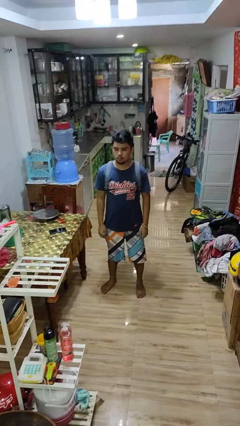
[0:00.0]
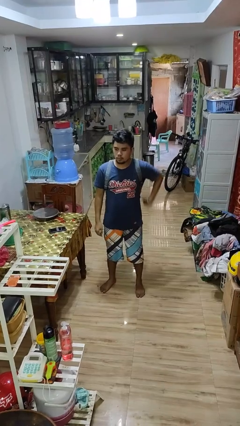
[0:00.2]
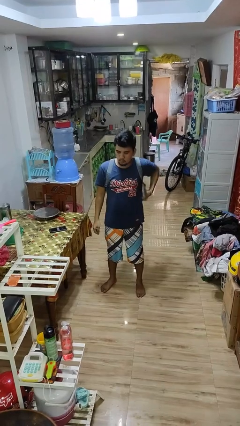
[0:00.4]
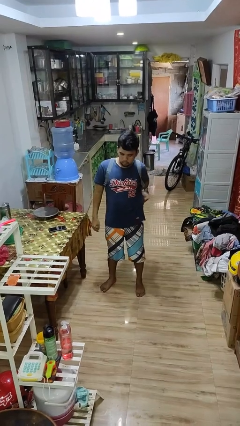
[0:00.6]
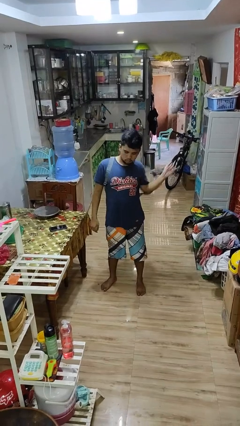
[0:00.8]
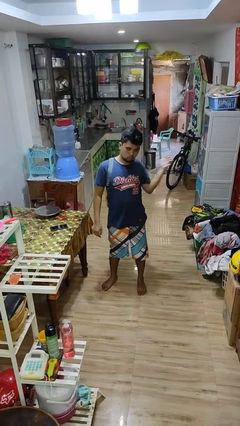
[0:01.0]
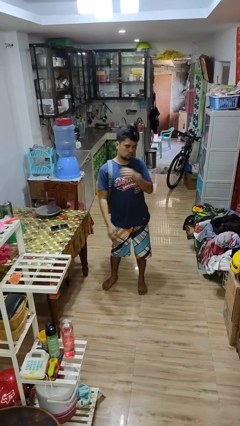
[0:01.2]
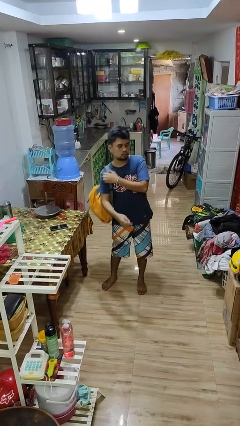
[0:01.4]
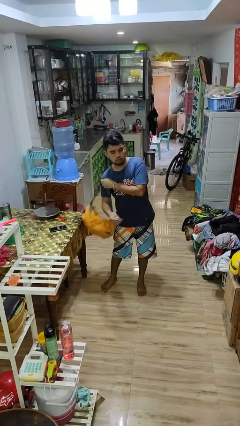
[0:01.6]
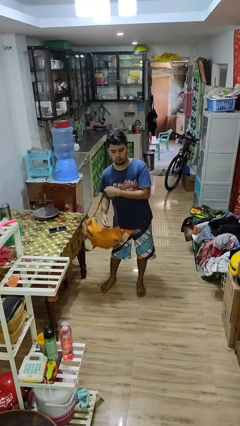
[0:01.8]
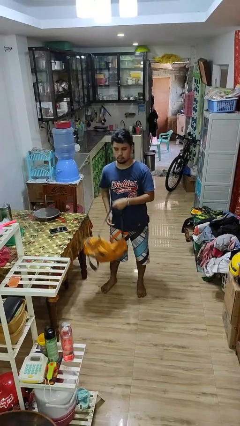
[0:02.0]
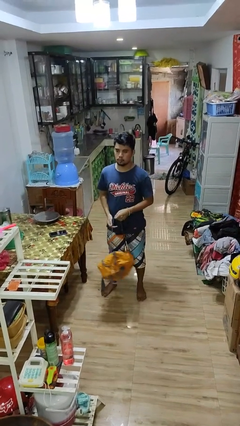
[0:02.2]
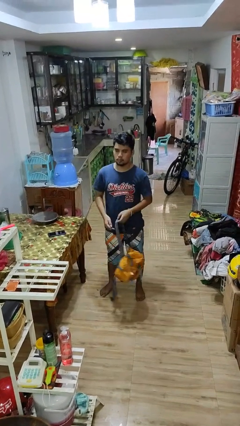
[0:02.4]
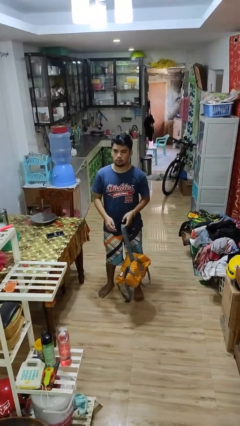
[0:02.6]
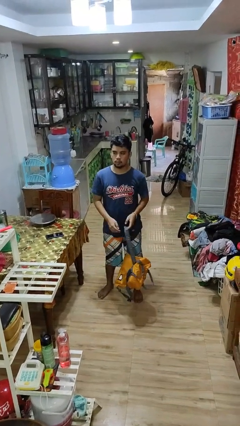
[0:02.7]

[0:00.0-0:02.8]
person takes off backpack

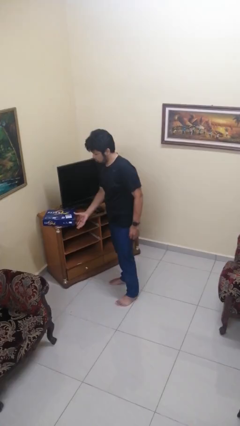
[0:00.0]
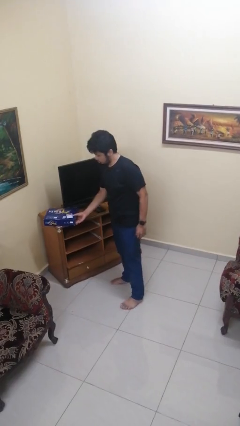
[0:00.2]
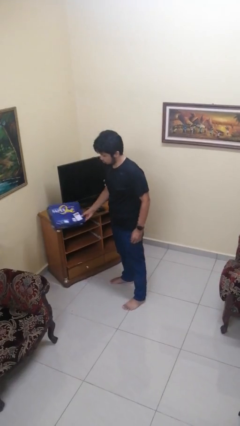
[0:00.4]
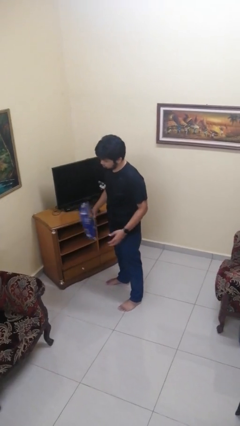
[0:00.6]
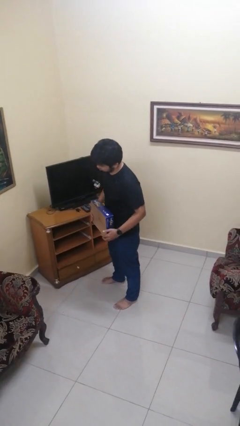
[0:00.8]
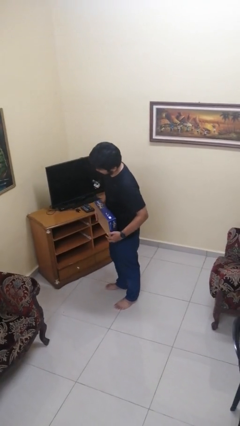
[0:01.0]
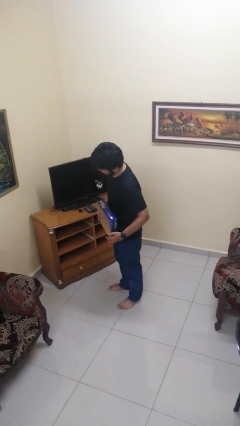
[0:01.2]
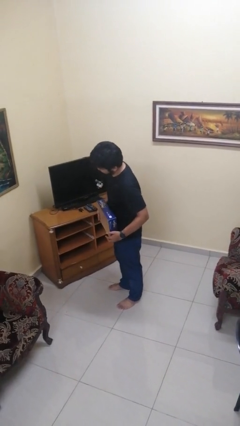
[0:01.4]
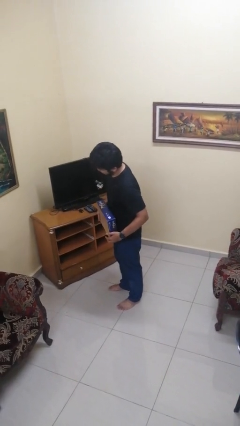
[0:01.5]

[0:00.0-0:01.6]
person picks up object from countertop

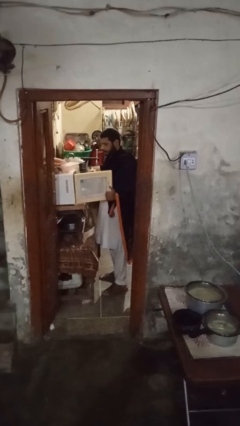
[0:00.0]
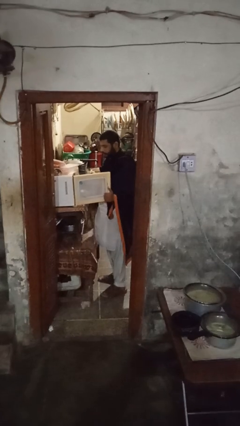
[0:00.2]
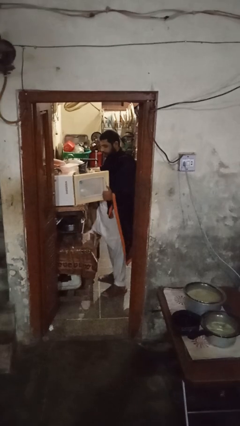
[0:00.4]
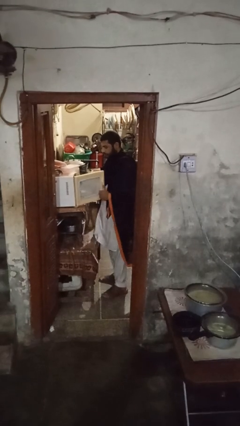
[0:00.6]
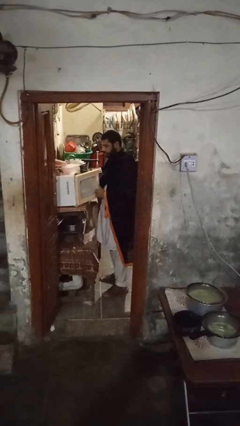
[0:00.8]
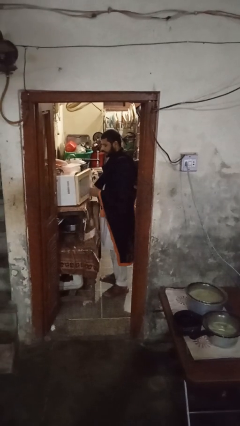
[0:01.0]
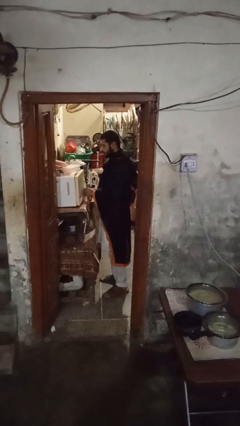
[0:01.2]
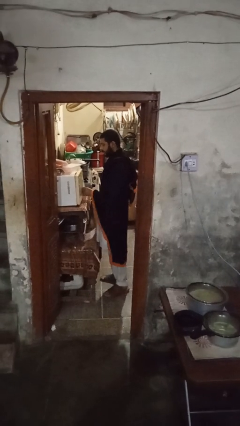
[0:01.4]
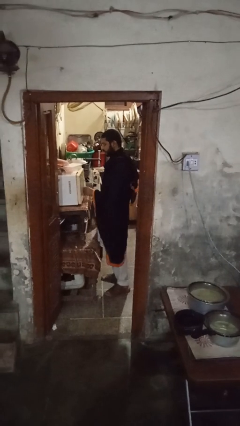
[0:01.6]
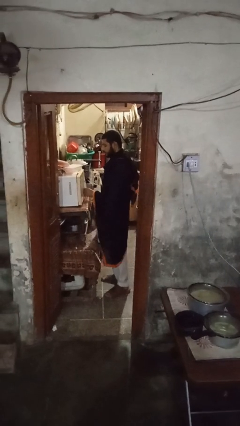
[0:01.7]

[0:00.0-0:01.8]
person closes microwave

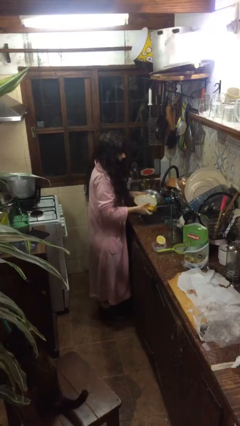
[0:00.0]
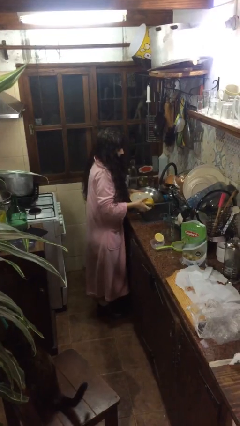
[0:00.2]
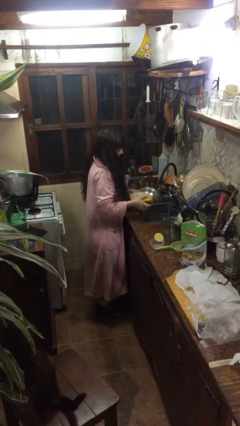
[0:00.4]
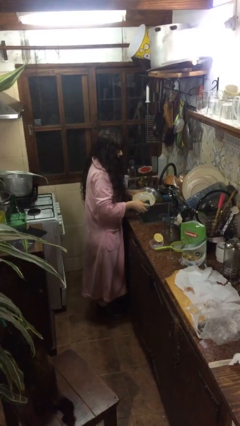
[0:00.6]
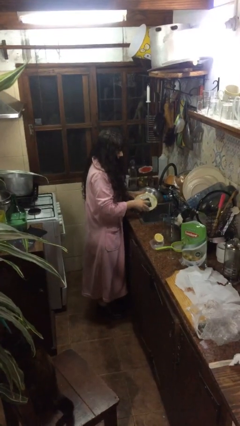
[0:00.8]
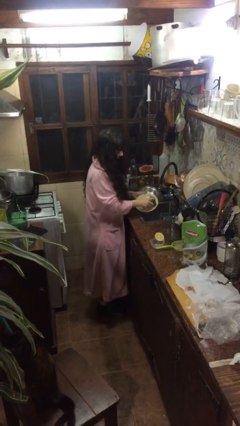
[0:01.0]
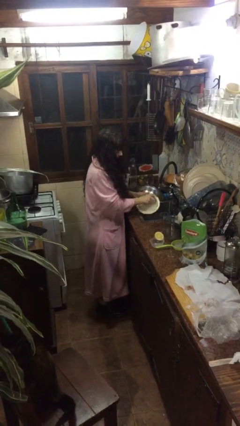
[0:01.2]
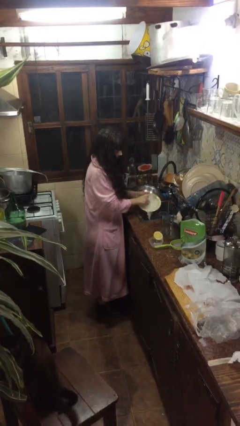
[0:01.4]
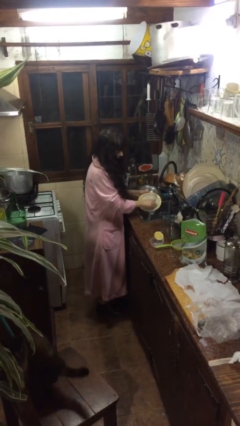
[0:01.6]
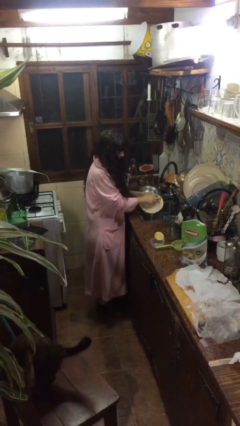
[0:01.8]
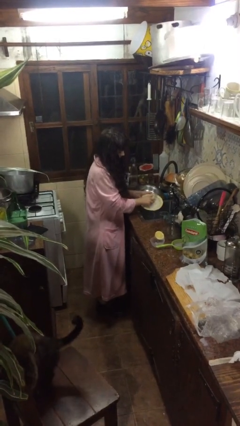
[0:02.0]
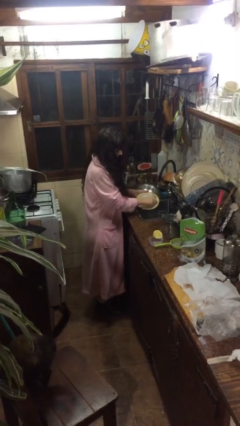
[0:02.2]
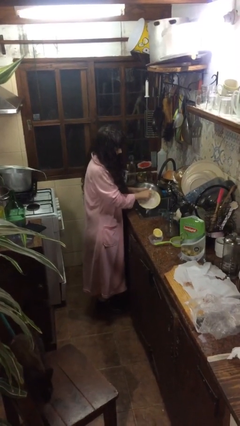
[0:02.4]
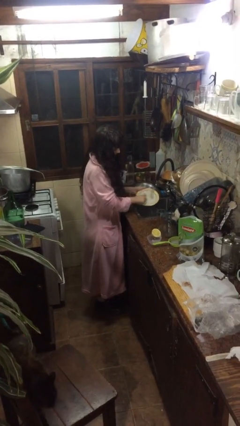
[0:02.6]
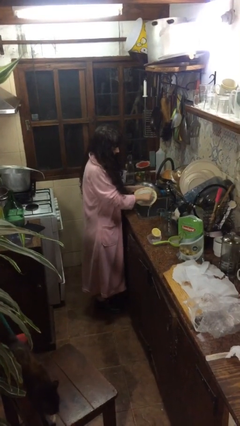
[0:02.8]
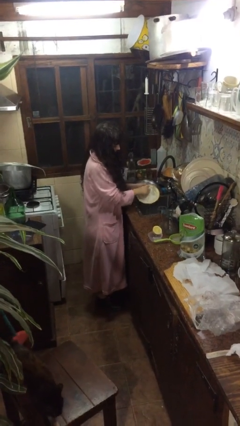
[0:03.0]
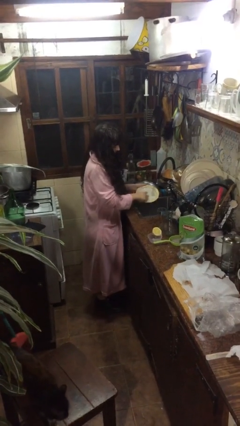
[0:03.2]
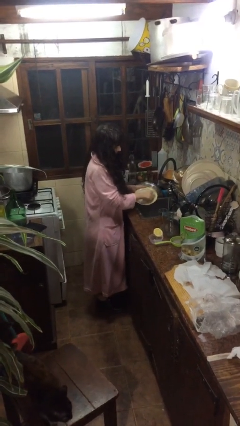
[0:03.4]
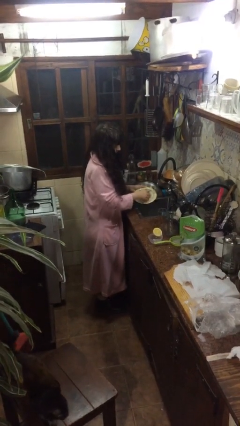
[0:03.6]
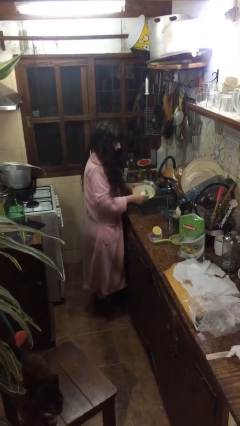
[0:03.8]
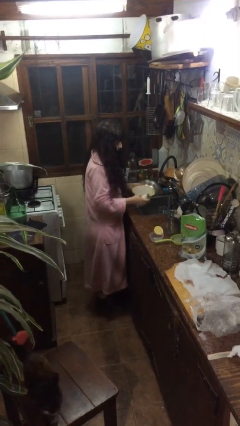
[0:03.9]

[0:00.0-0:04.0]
person washes dish

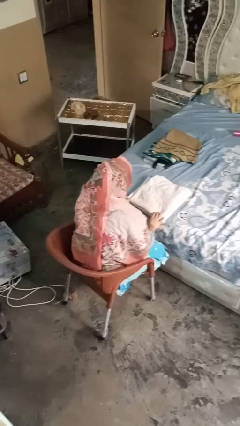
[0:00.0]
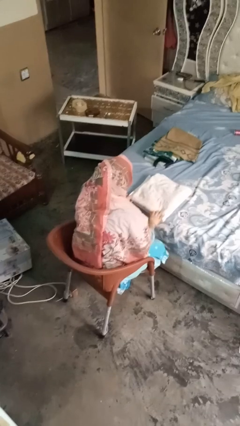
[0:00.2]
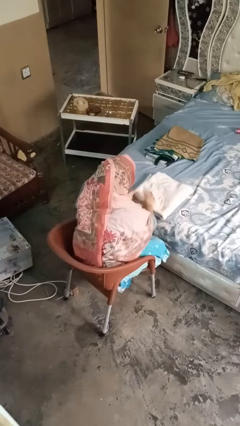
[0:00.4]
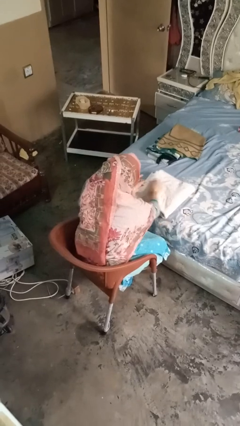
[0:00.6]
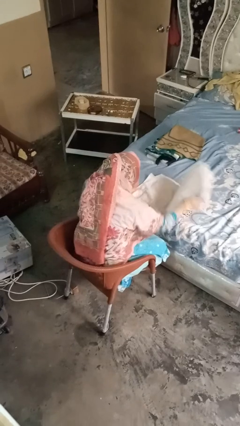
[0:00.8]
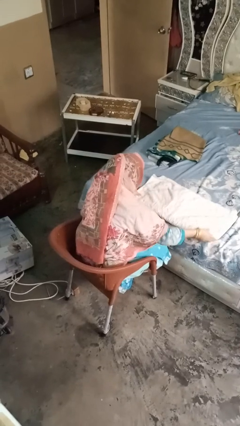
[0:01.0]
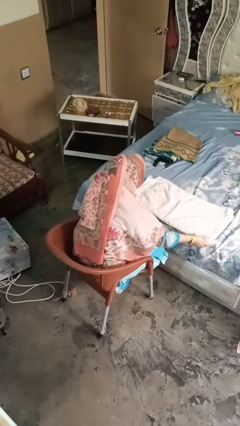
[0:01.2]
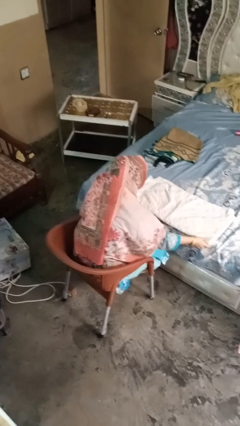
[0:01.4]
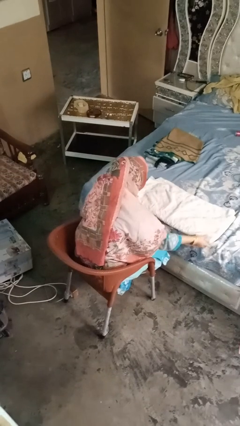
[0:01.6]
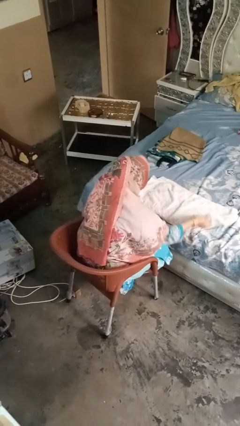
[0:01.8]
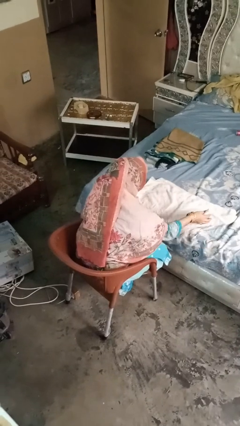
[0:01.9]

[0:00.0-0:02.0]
person folds towel

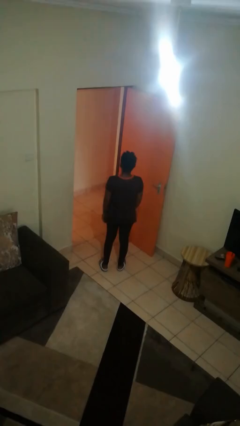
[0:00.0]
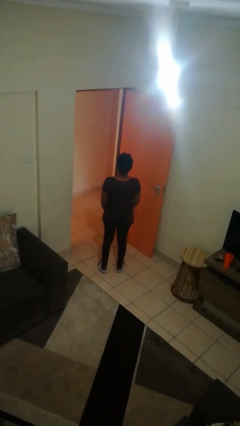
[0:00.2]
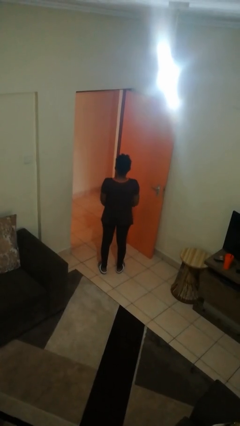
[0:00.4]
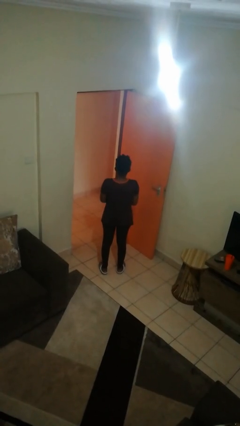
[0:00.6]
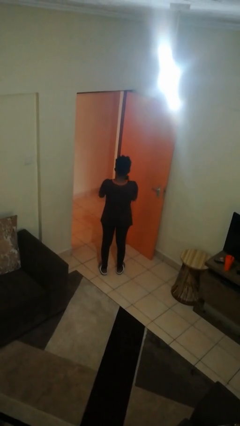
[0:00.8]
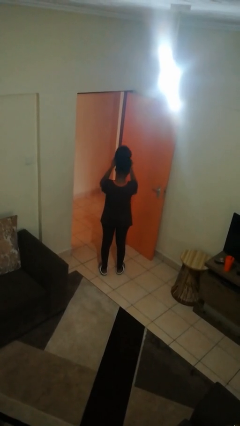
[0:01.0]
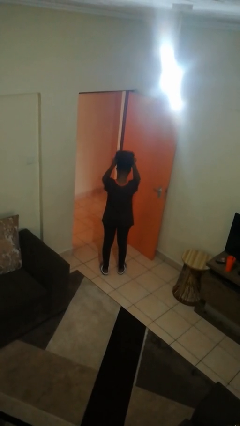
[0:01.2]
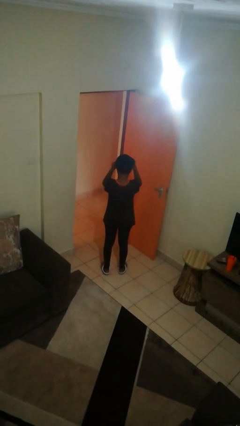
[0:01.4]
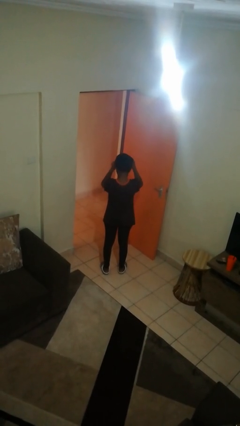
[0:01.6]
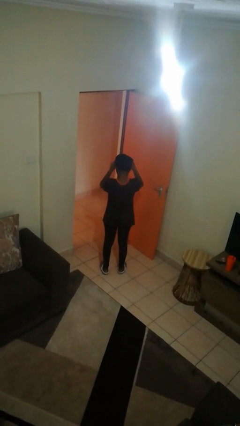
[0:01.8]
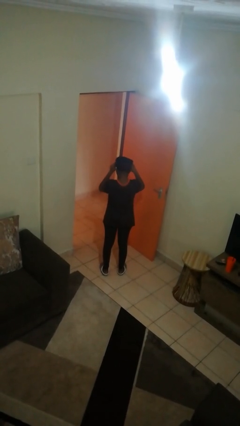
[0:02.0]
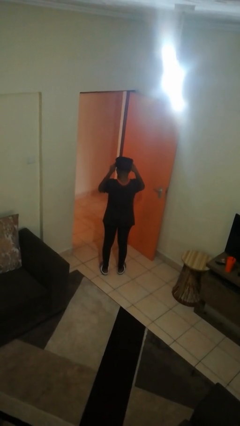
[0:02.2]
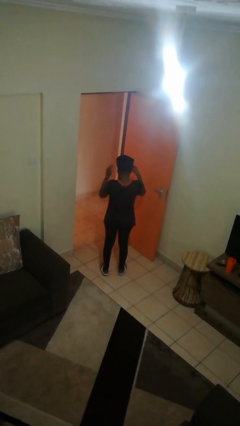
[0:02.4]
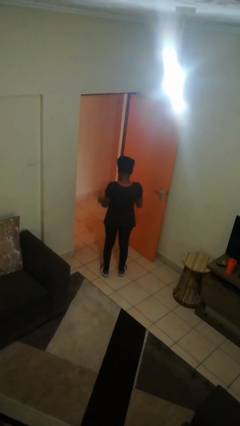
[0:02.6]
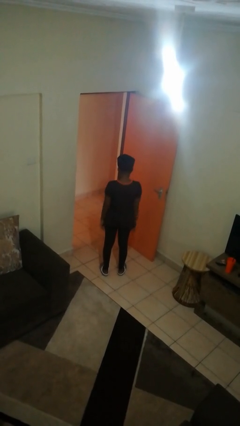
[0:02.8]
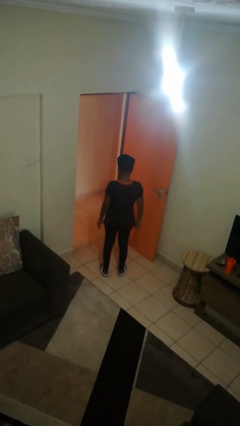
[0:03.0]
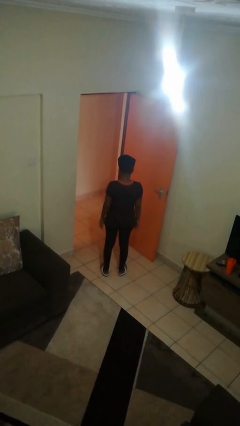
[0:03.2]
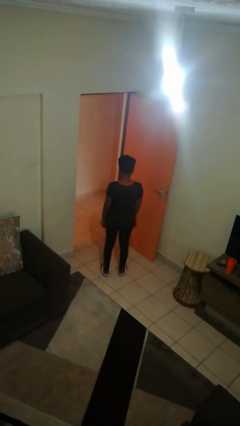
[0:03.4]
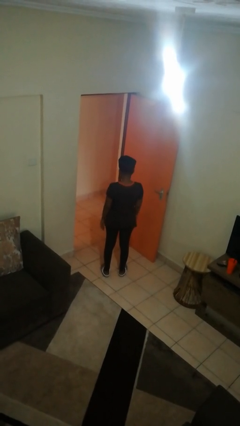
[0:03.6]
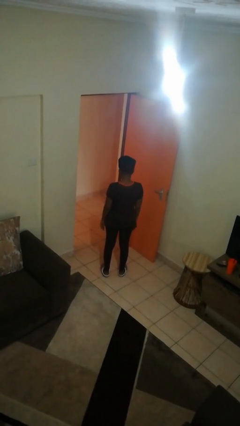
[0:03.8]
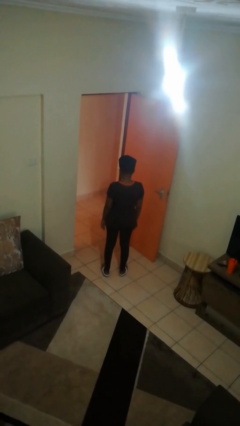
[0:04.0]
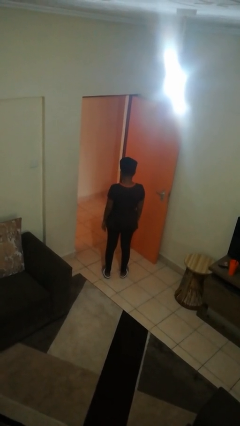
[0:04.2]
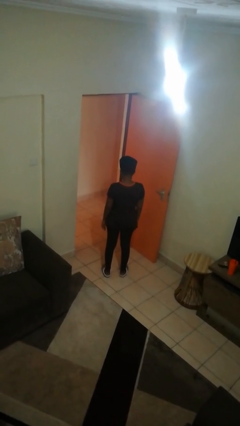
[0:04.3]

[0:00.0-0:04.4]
person puts on hat

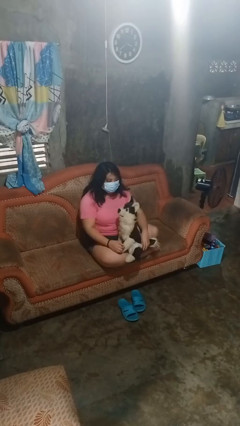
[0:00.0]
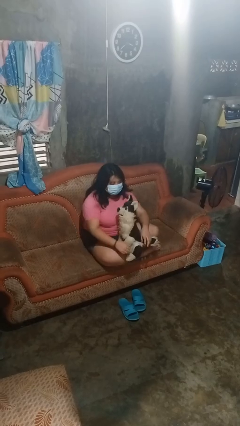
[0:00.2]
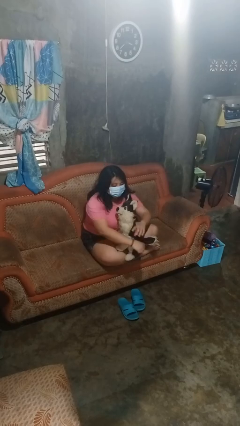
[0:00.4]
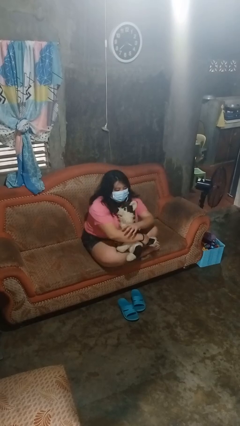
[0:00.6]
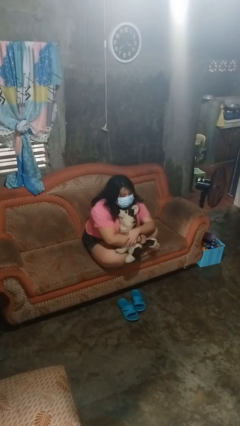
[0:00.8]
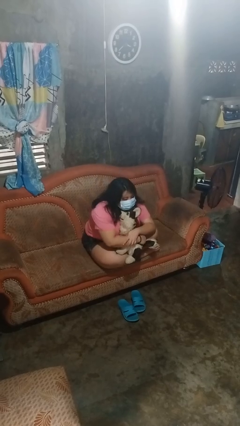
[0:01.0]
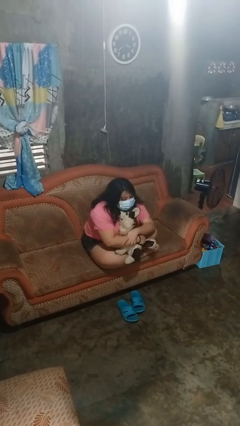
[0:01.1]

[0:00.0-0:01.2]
person hugs stuffed animal
